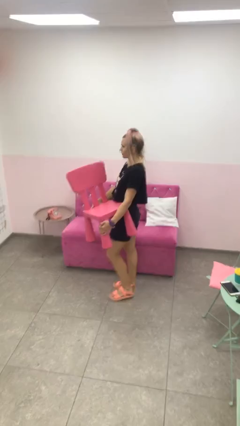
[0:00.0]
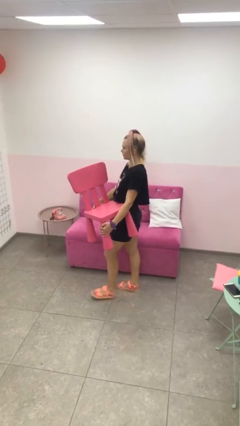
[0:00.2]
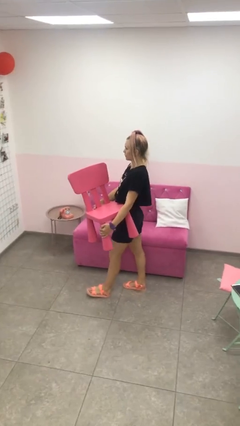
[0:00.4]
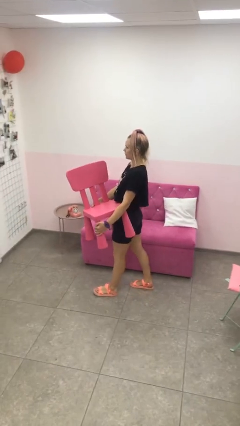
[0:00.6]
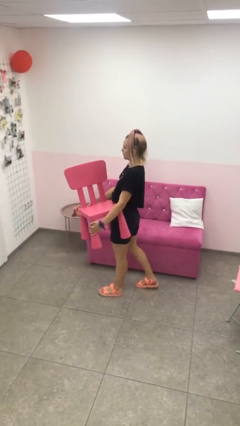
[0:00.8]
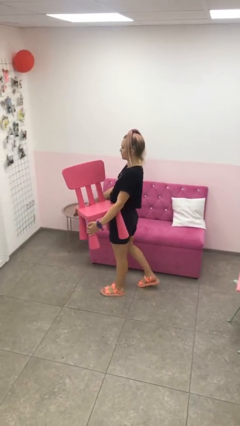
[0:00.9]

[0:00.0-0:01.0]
person carries furniture

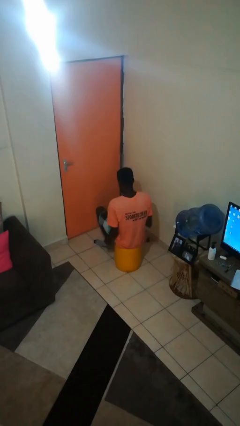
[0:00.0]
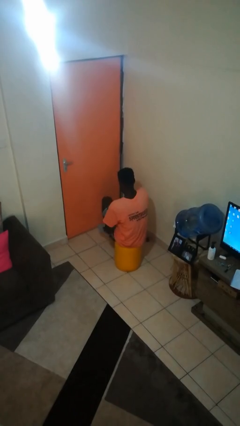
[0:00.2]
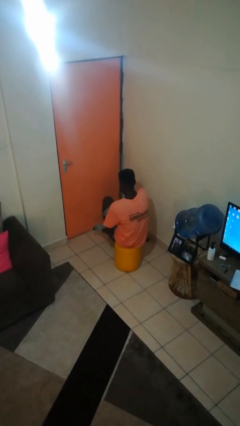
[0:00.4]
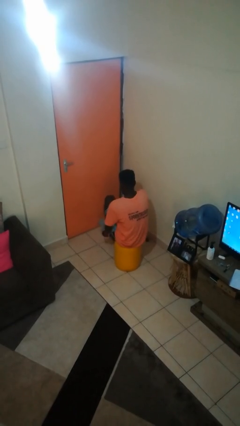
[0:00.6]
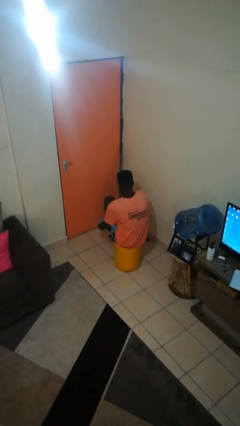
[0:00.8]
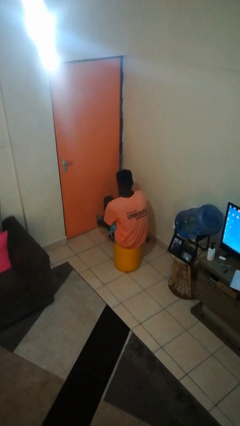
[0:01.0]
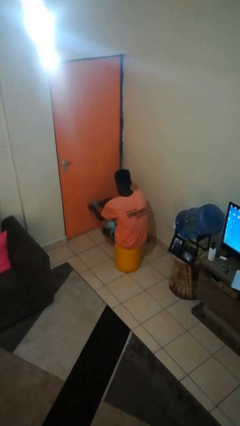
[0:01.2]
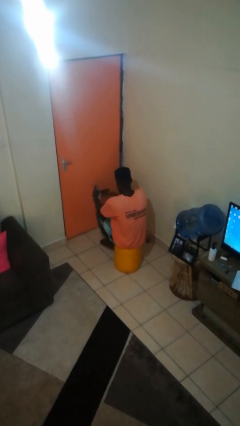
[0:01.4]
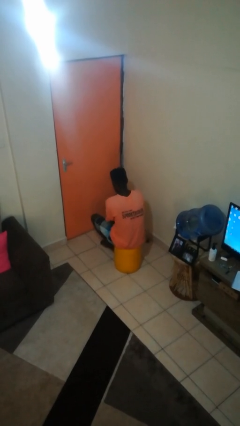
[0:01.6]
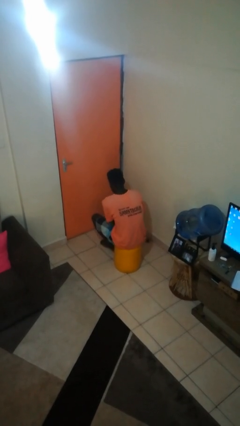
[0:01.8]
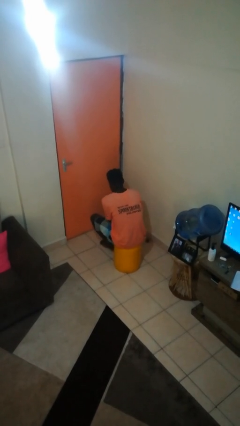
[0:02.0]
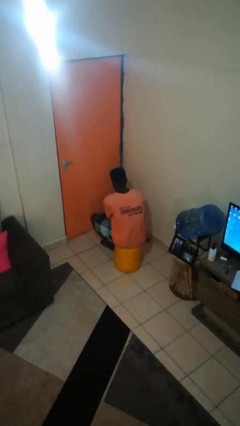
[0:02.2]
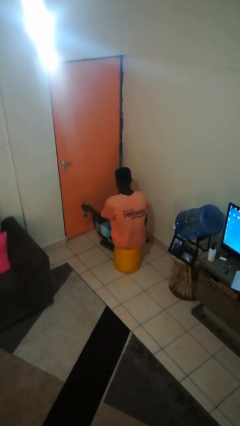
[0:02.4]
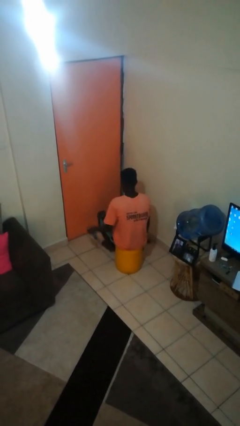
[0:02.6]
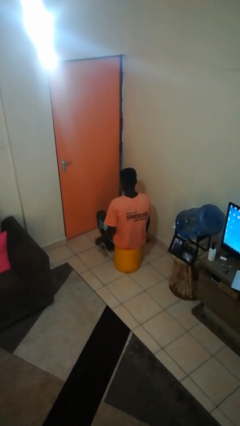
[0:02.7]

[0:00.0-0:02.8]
person takes off socks

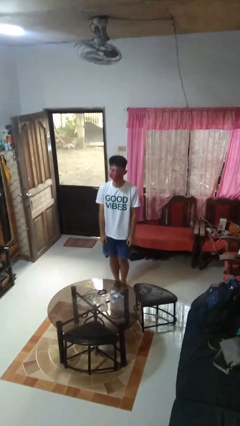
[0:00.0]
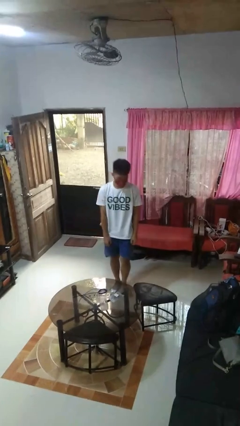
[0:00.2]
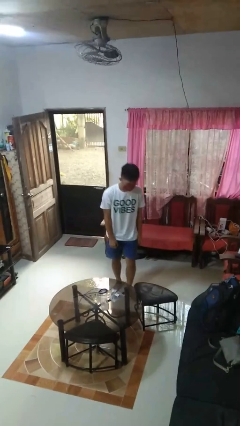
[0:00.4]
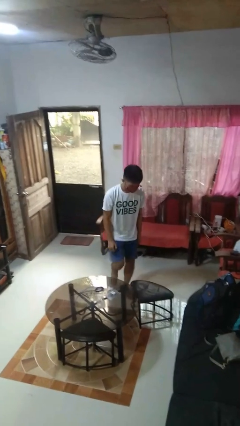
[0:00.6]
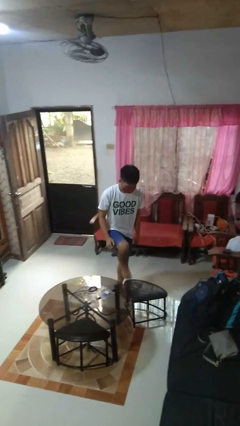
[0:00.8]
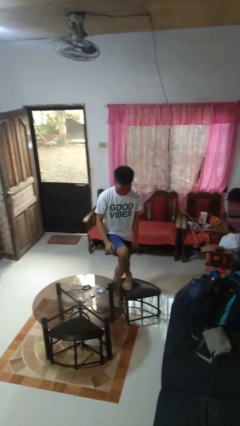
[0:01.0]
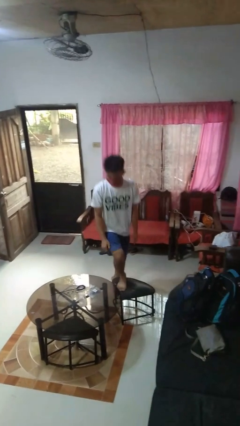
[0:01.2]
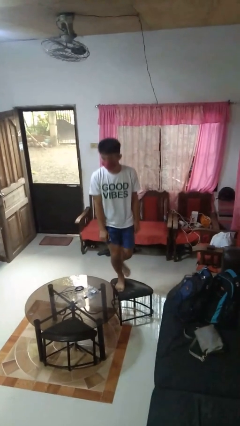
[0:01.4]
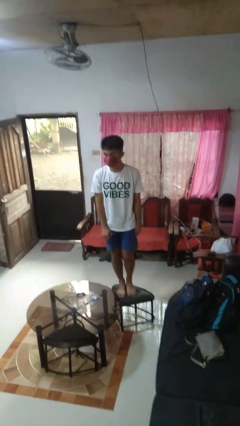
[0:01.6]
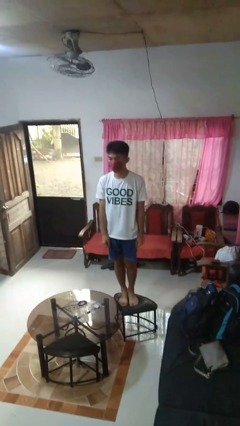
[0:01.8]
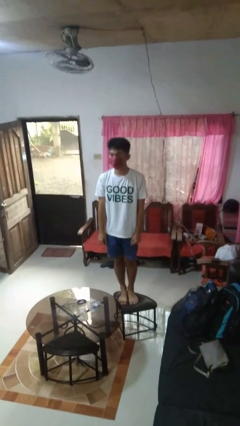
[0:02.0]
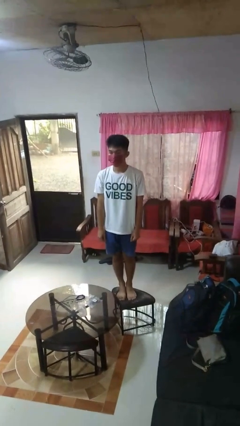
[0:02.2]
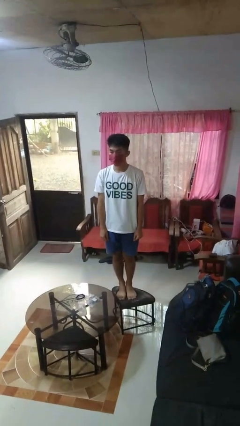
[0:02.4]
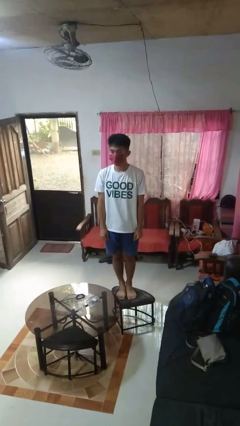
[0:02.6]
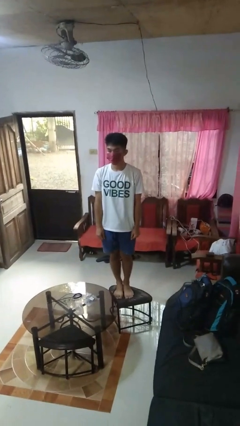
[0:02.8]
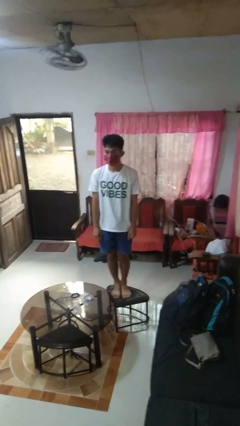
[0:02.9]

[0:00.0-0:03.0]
person climbs on chair

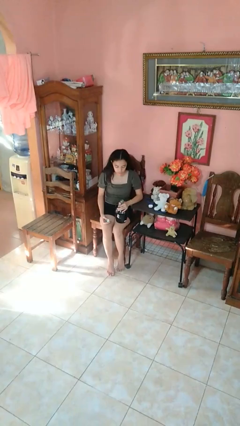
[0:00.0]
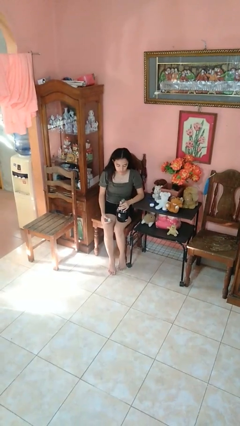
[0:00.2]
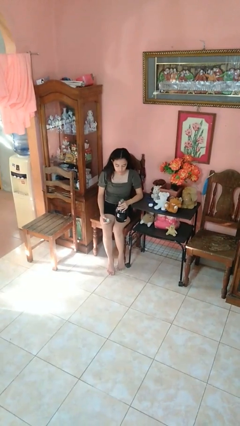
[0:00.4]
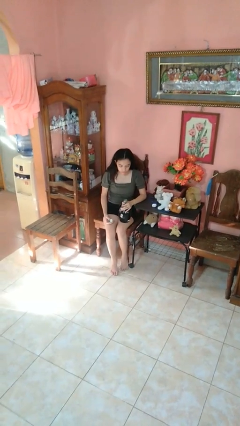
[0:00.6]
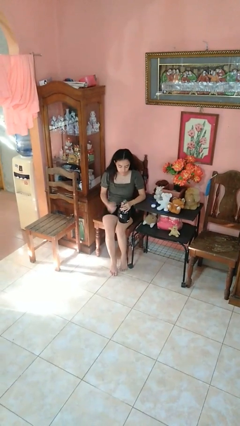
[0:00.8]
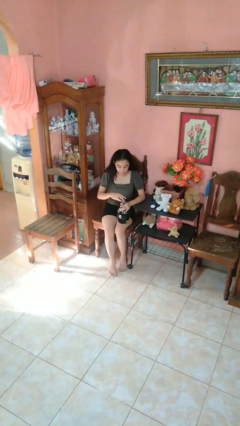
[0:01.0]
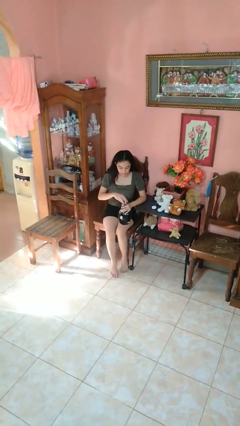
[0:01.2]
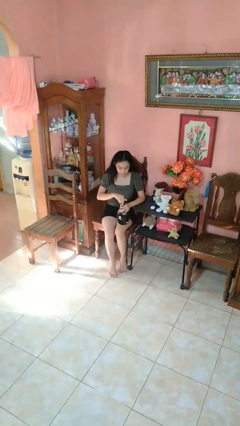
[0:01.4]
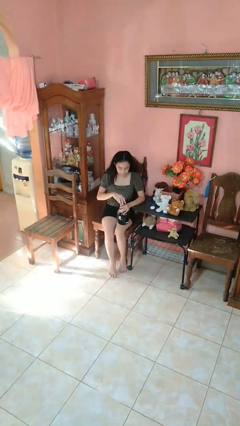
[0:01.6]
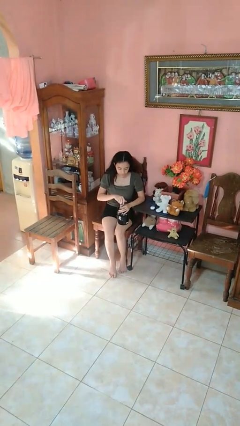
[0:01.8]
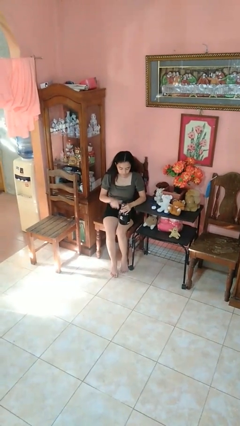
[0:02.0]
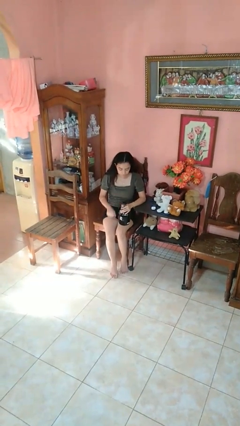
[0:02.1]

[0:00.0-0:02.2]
person screws lid to bottle

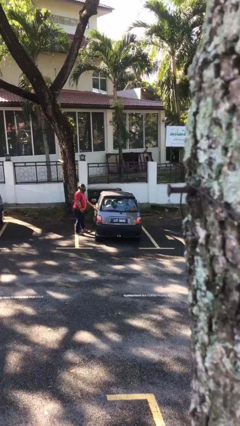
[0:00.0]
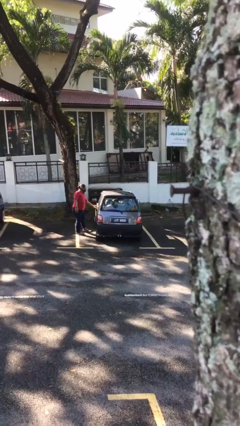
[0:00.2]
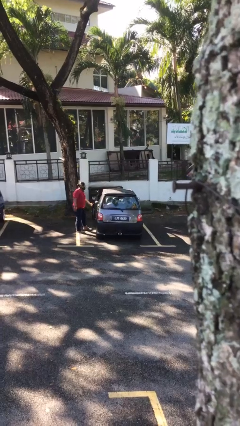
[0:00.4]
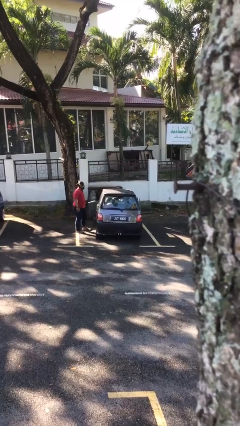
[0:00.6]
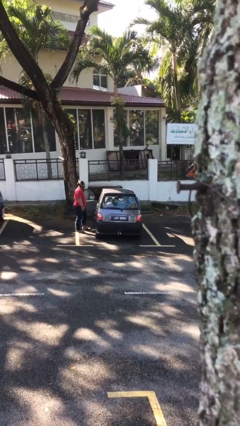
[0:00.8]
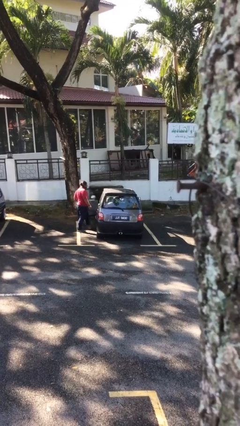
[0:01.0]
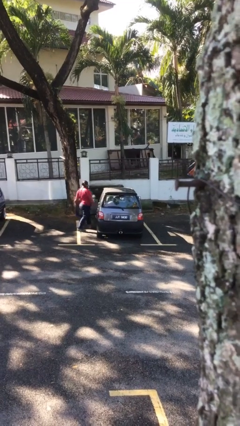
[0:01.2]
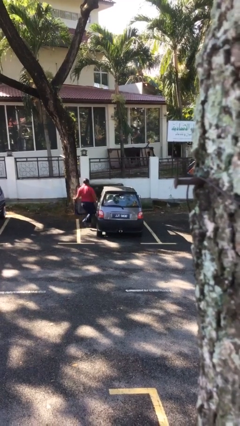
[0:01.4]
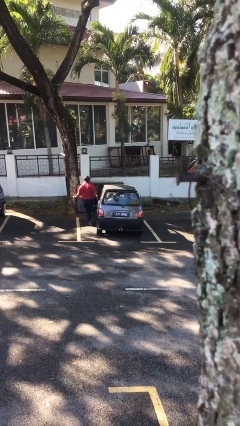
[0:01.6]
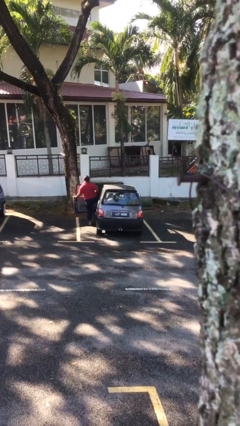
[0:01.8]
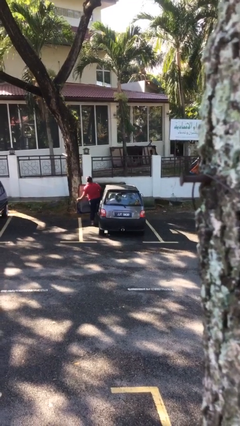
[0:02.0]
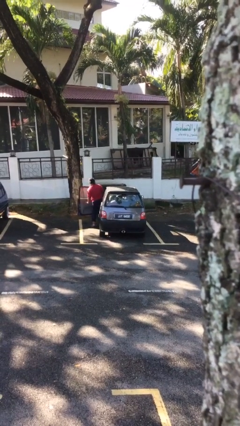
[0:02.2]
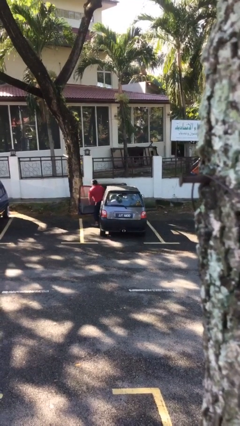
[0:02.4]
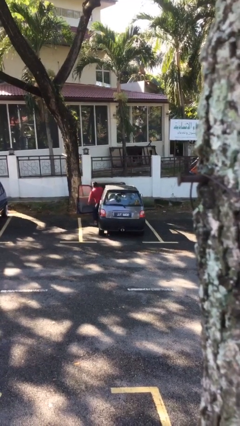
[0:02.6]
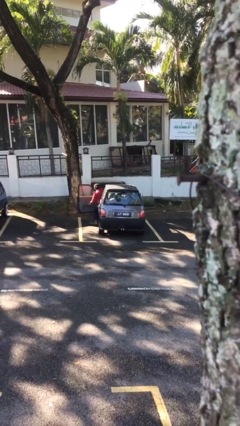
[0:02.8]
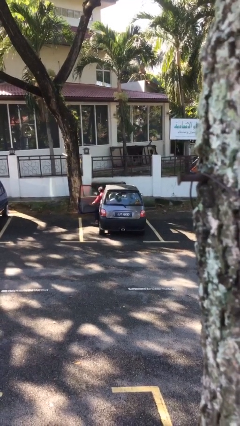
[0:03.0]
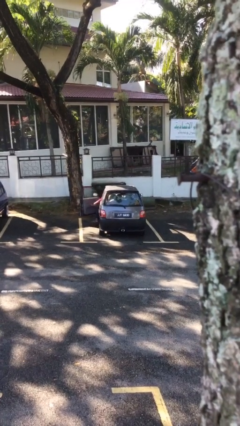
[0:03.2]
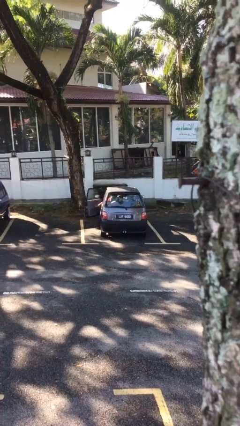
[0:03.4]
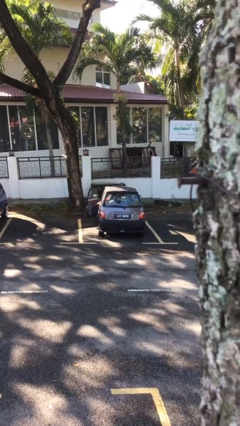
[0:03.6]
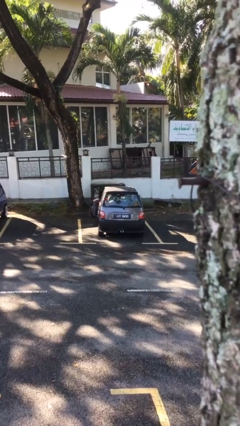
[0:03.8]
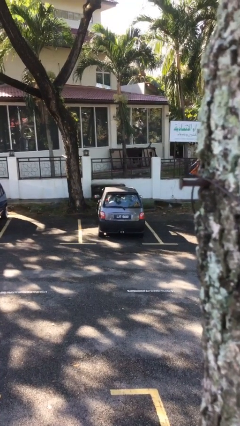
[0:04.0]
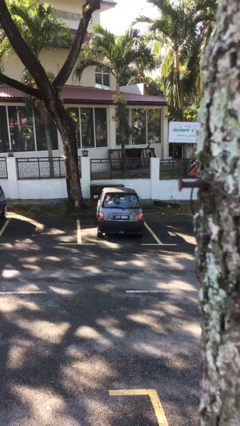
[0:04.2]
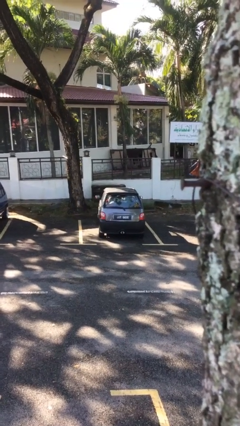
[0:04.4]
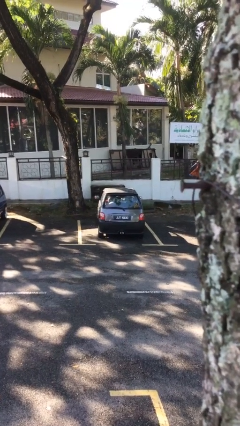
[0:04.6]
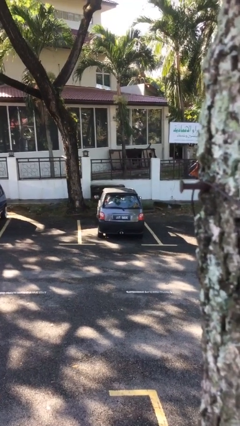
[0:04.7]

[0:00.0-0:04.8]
car picks up person

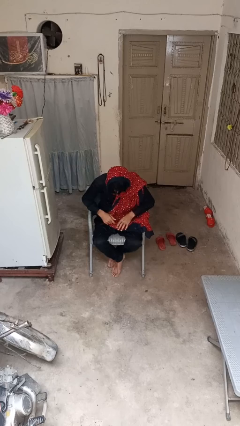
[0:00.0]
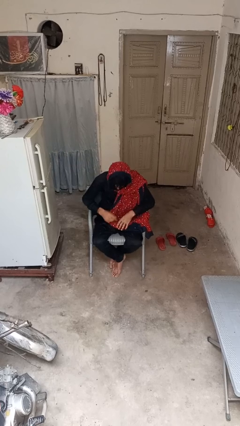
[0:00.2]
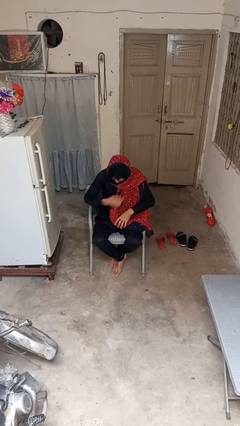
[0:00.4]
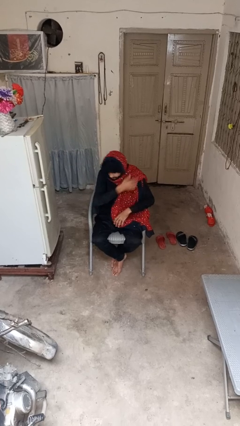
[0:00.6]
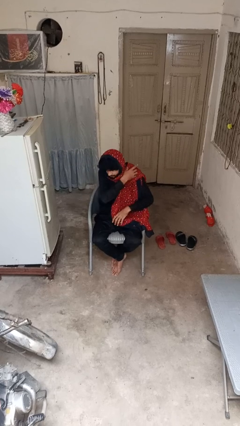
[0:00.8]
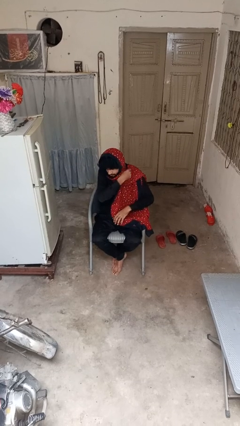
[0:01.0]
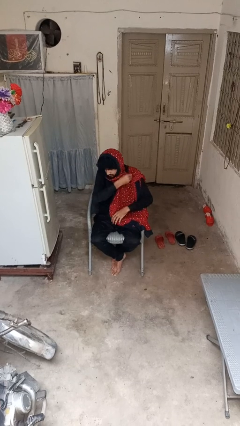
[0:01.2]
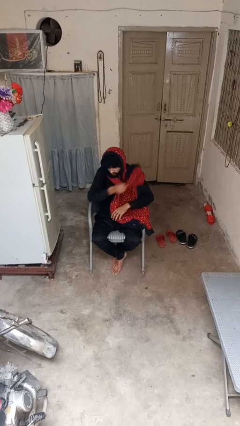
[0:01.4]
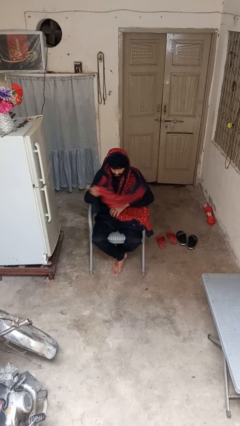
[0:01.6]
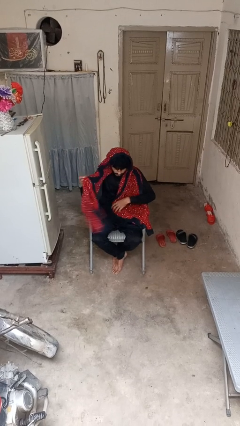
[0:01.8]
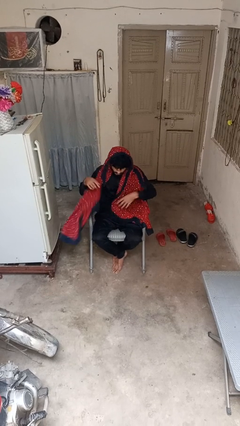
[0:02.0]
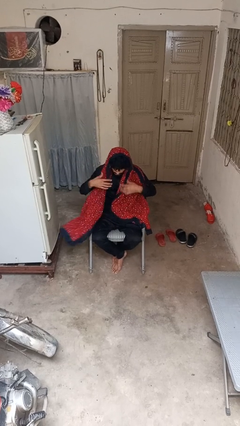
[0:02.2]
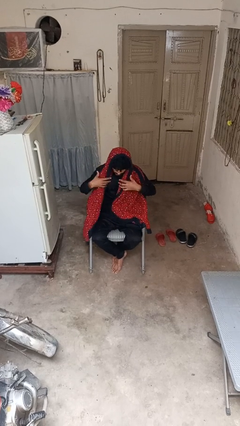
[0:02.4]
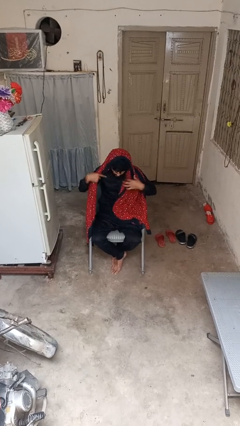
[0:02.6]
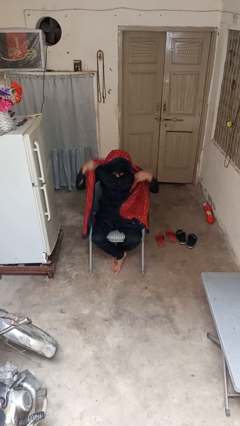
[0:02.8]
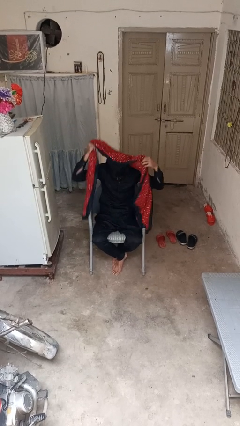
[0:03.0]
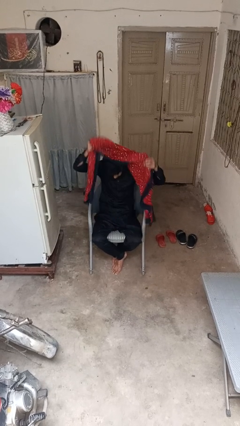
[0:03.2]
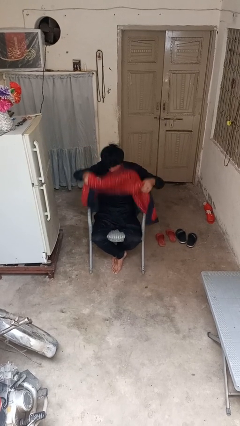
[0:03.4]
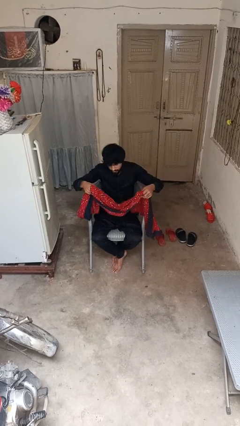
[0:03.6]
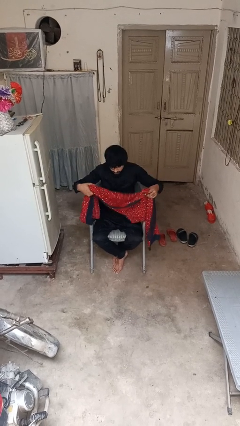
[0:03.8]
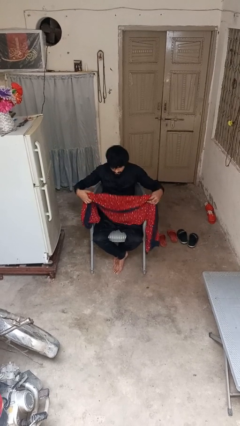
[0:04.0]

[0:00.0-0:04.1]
person takes off scarf
